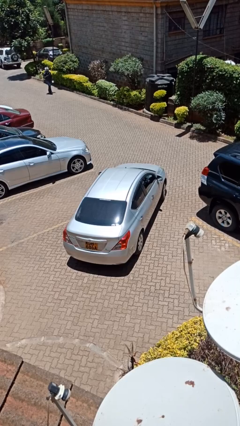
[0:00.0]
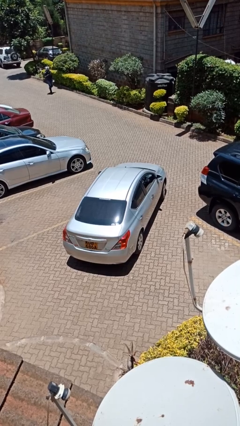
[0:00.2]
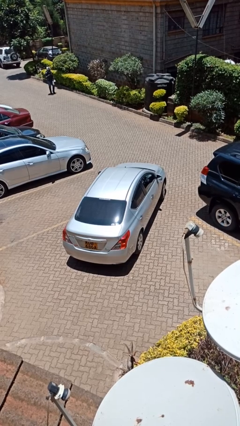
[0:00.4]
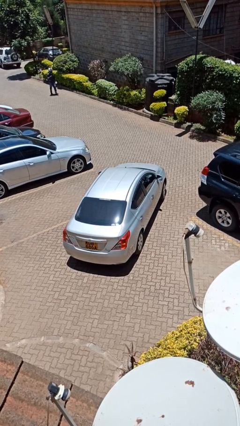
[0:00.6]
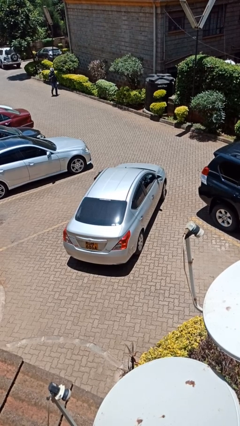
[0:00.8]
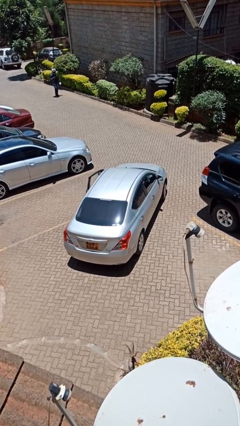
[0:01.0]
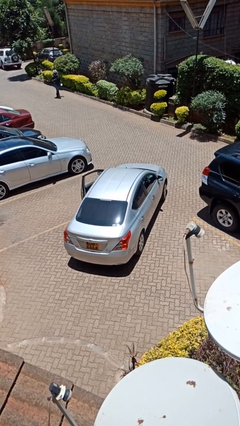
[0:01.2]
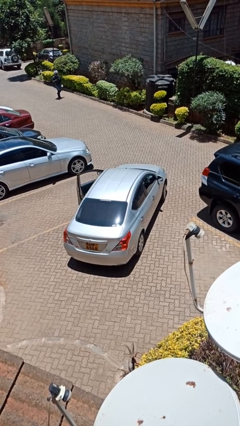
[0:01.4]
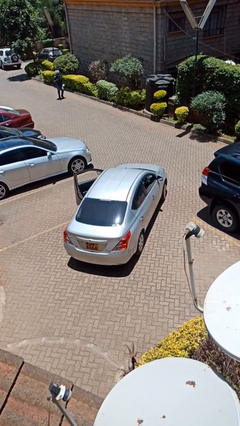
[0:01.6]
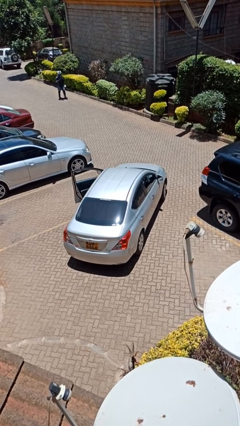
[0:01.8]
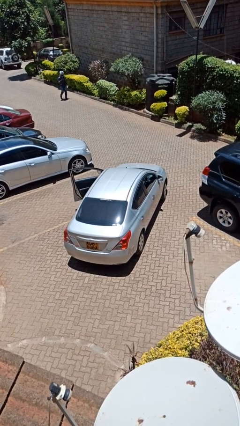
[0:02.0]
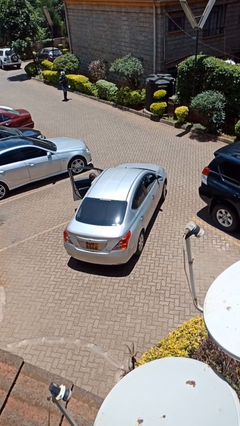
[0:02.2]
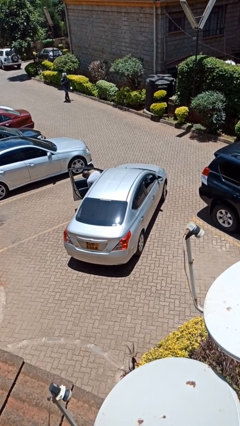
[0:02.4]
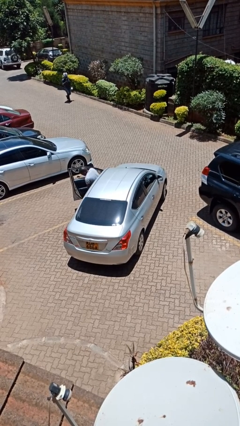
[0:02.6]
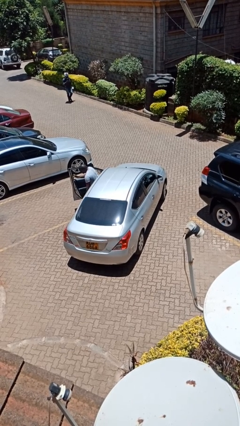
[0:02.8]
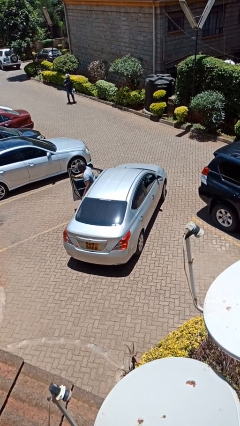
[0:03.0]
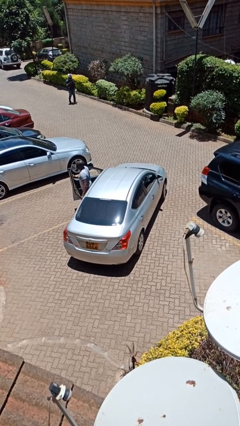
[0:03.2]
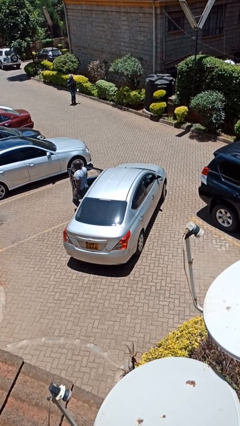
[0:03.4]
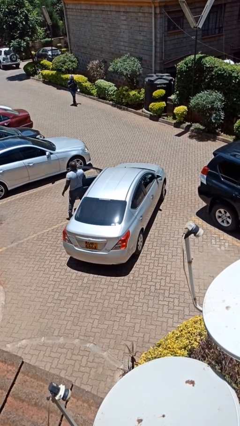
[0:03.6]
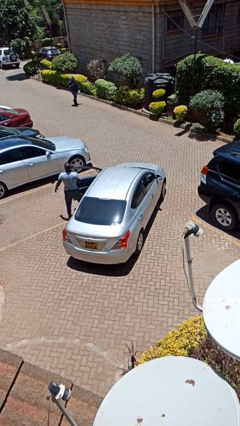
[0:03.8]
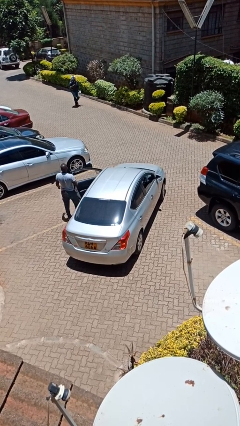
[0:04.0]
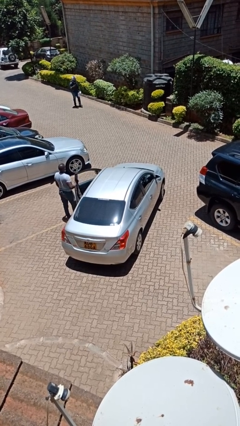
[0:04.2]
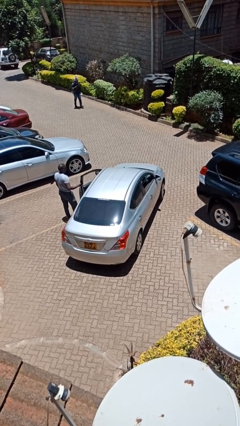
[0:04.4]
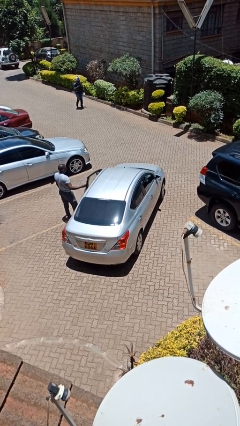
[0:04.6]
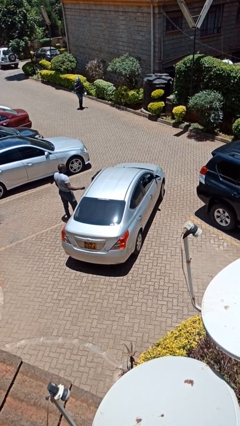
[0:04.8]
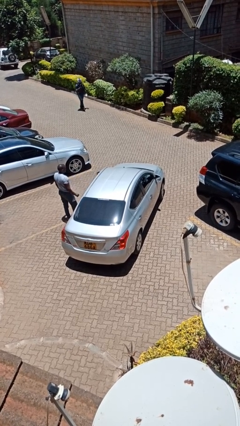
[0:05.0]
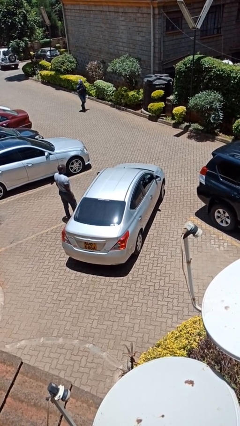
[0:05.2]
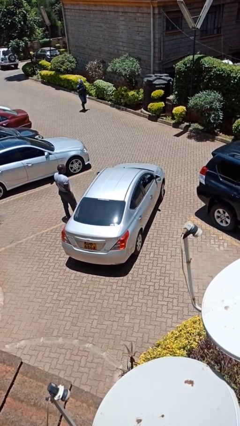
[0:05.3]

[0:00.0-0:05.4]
car drops off person

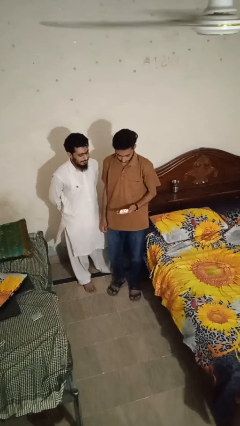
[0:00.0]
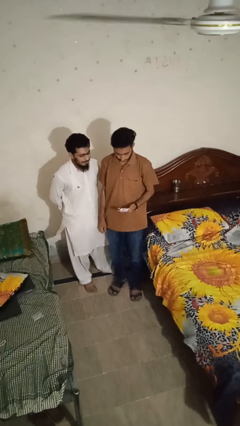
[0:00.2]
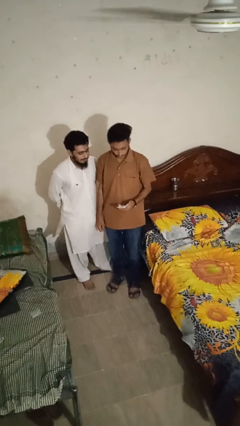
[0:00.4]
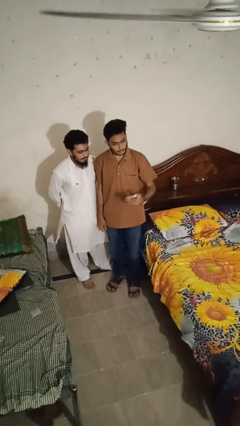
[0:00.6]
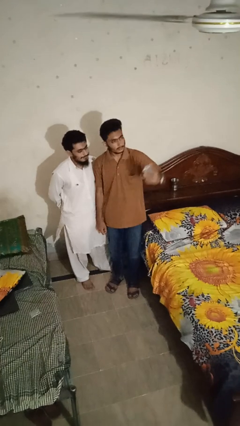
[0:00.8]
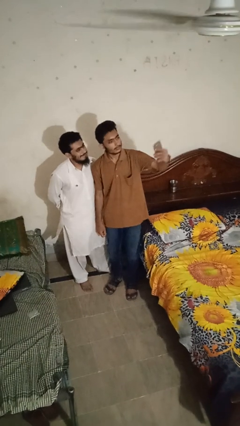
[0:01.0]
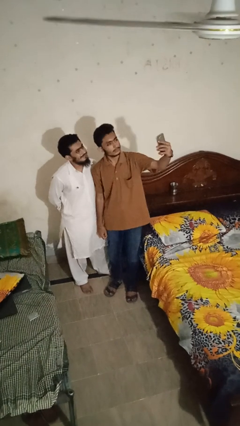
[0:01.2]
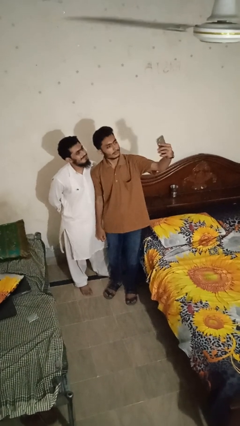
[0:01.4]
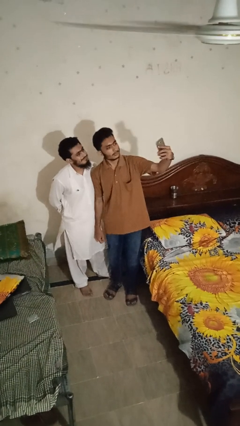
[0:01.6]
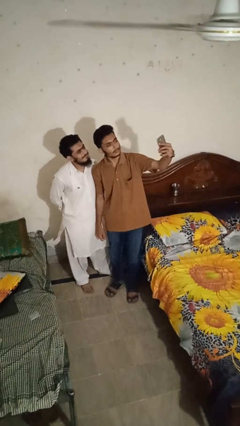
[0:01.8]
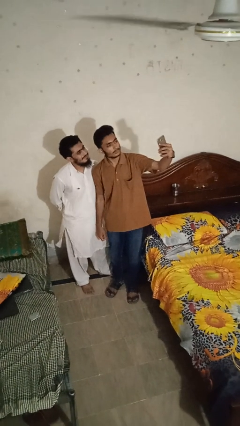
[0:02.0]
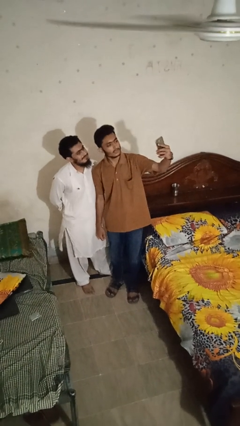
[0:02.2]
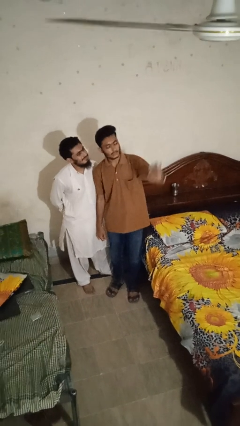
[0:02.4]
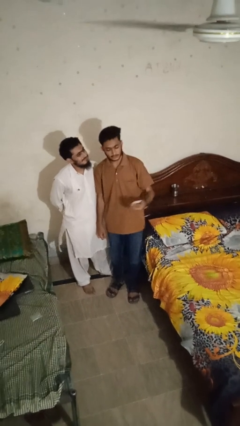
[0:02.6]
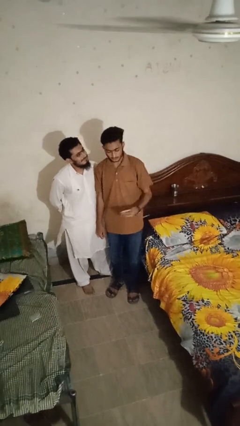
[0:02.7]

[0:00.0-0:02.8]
person takes selfie with person

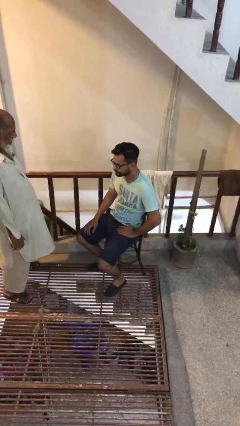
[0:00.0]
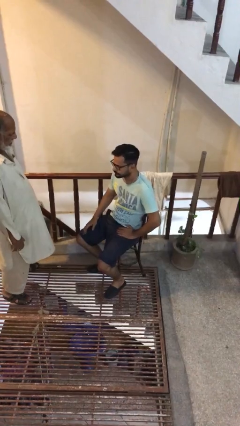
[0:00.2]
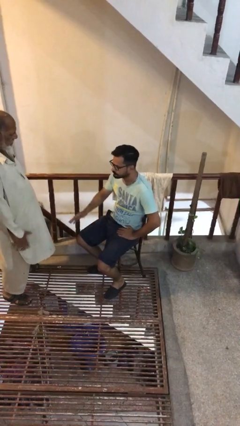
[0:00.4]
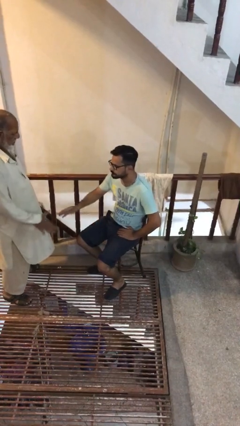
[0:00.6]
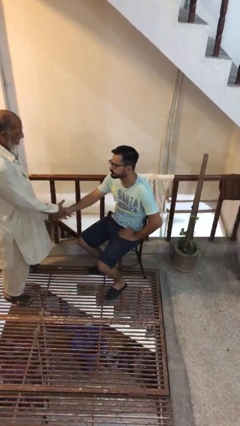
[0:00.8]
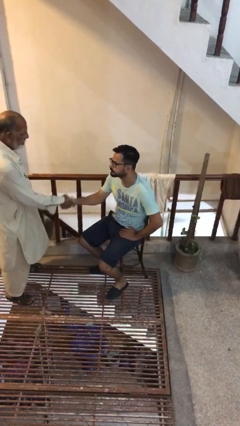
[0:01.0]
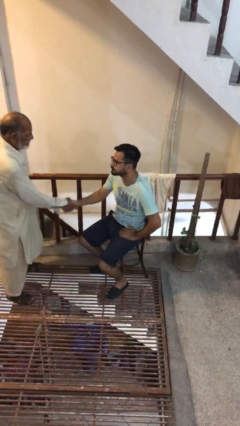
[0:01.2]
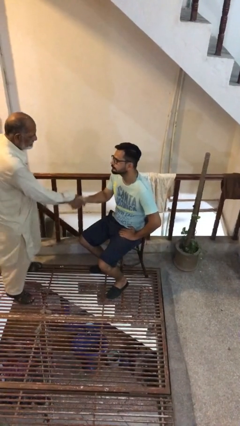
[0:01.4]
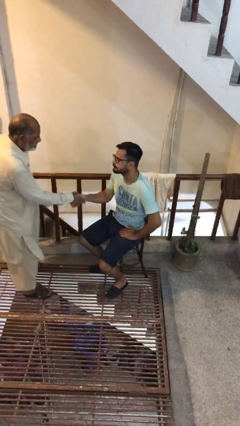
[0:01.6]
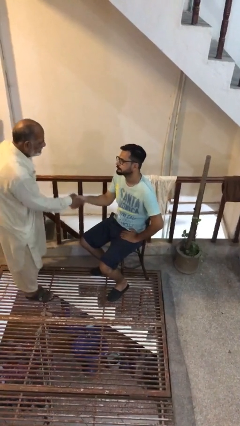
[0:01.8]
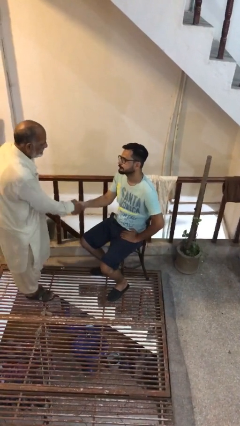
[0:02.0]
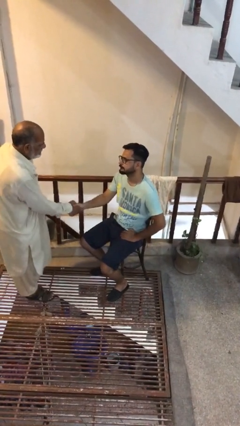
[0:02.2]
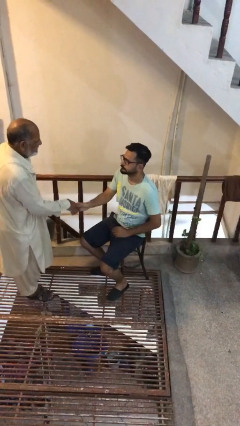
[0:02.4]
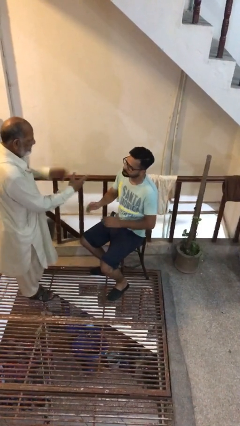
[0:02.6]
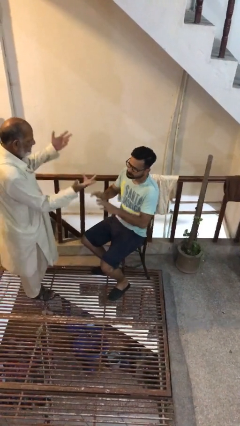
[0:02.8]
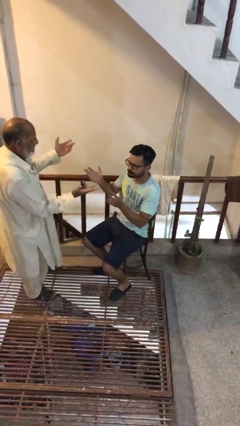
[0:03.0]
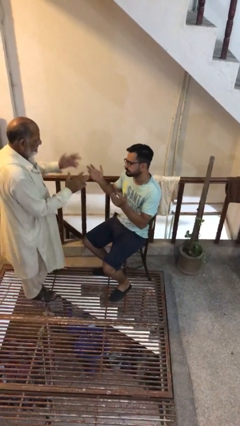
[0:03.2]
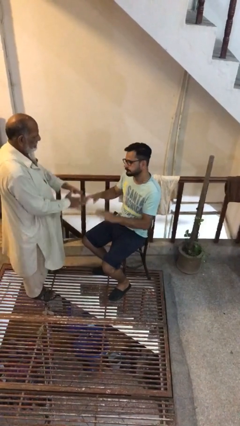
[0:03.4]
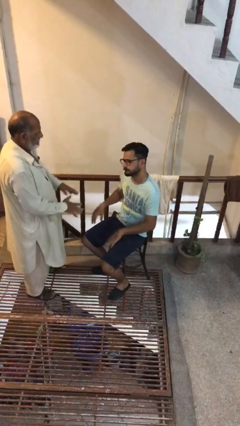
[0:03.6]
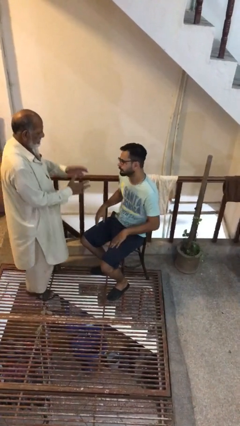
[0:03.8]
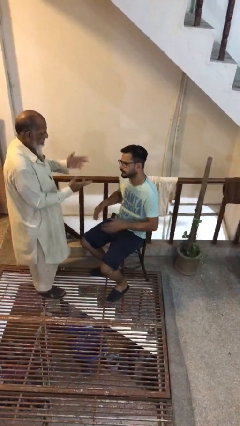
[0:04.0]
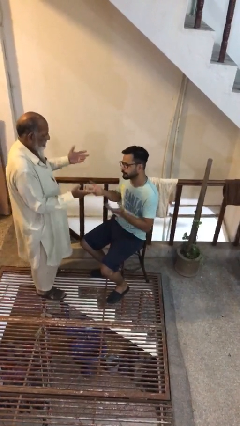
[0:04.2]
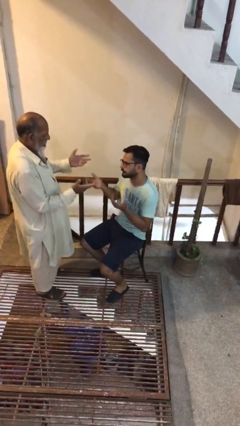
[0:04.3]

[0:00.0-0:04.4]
person shakes hand

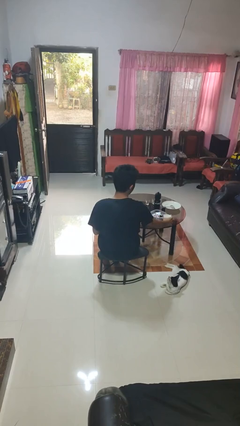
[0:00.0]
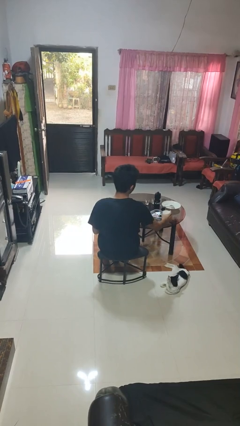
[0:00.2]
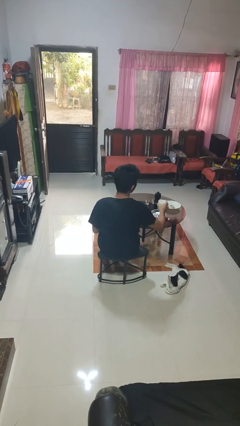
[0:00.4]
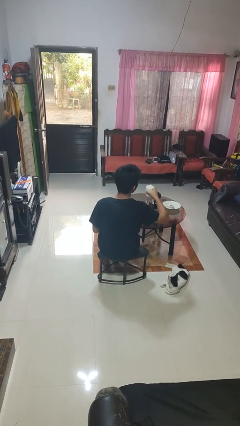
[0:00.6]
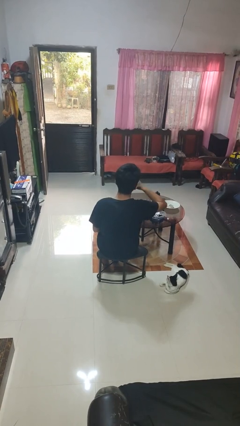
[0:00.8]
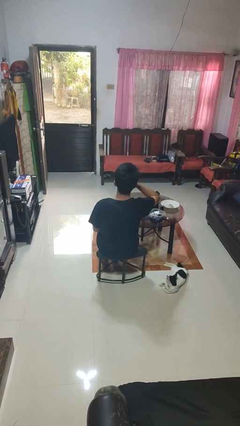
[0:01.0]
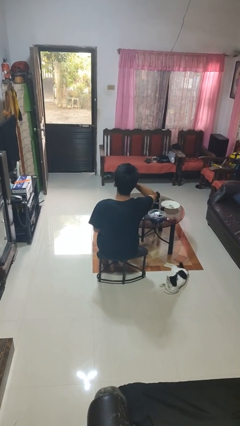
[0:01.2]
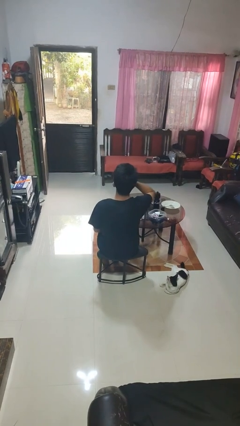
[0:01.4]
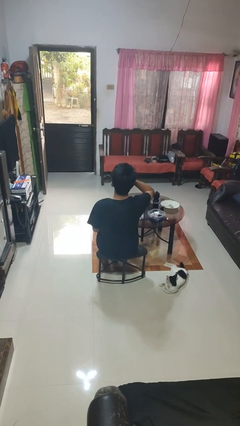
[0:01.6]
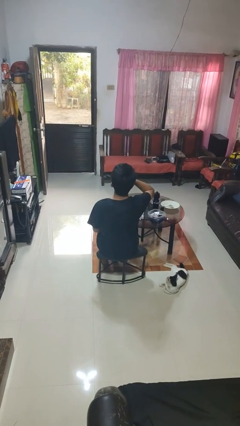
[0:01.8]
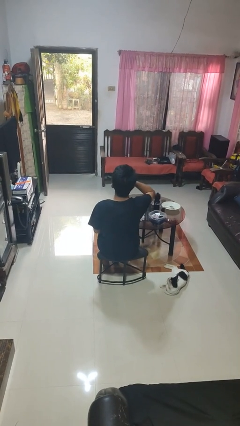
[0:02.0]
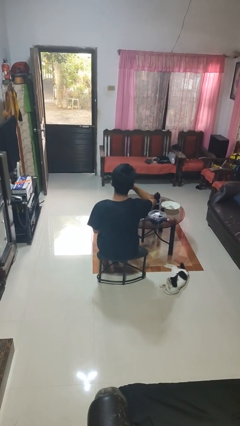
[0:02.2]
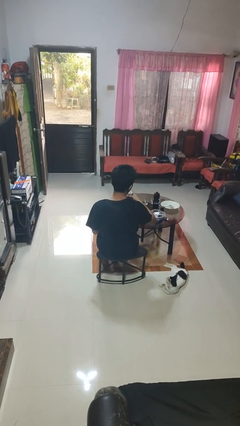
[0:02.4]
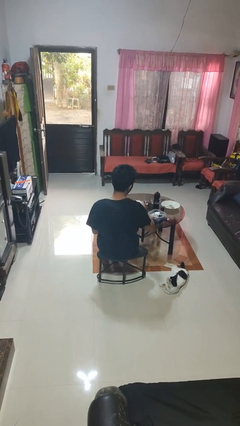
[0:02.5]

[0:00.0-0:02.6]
person drinks from cup

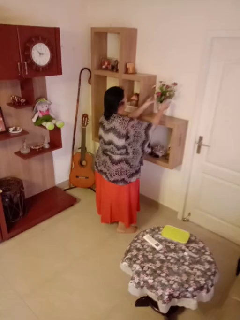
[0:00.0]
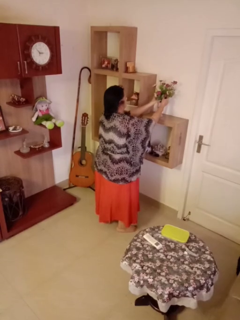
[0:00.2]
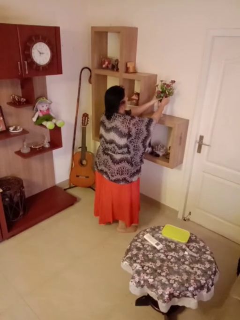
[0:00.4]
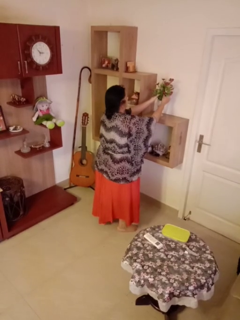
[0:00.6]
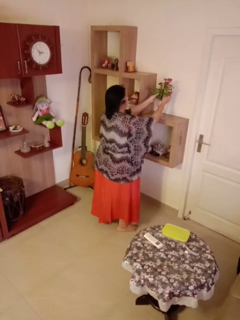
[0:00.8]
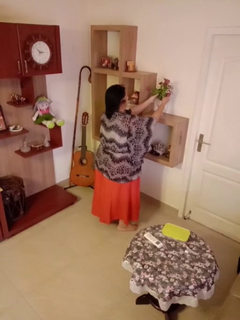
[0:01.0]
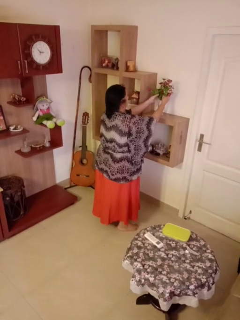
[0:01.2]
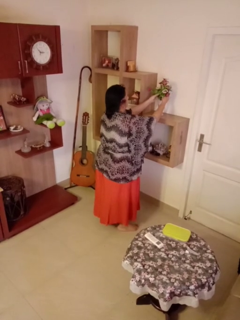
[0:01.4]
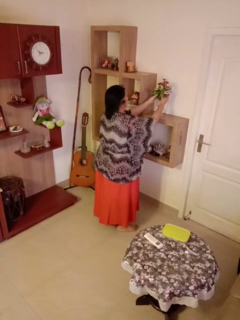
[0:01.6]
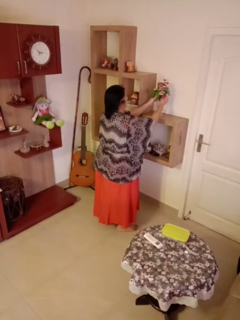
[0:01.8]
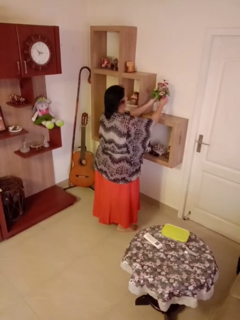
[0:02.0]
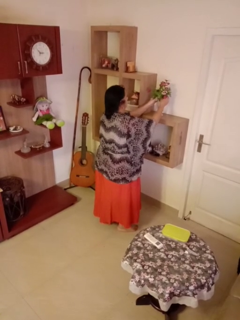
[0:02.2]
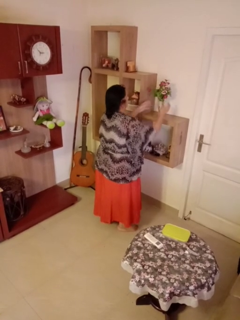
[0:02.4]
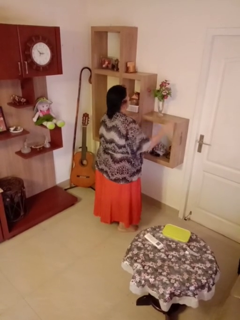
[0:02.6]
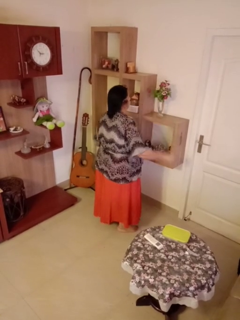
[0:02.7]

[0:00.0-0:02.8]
person arranges flowers in vase
